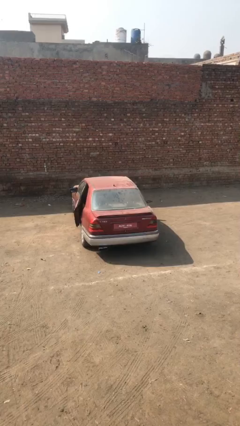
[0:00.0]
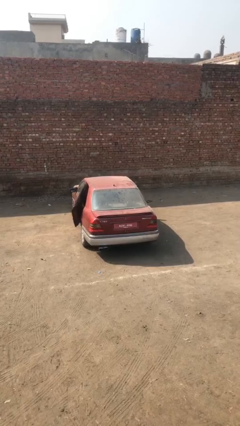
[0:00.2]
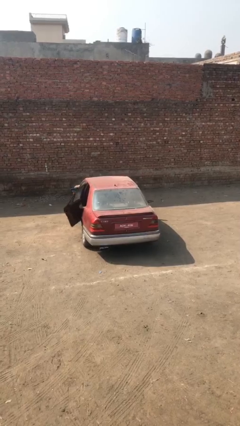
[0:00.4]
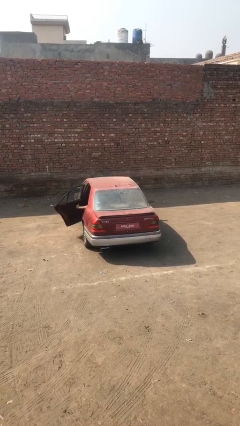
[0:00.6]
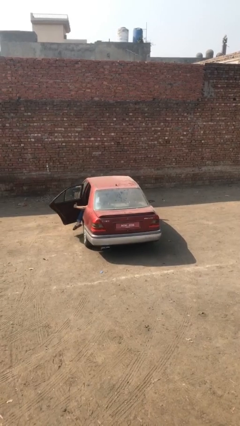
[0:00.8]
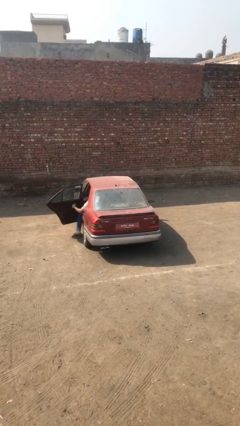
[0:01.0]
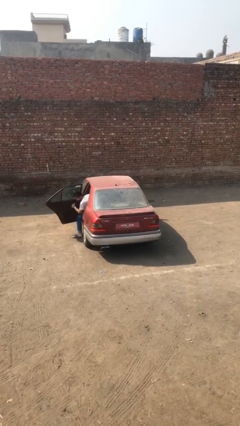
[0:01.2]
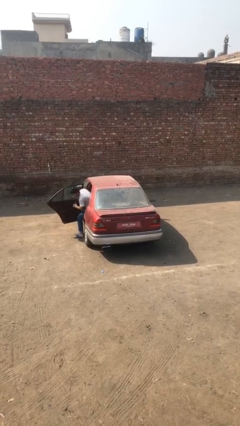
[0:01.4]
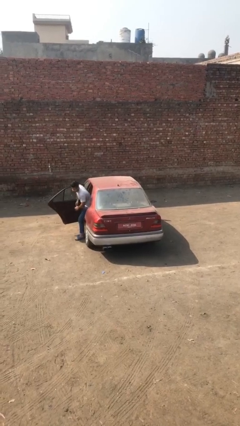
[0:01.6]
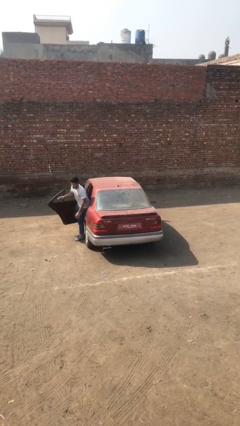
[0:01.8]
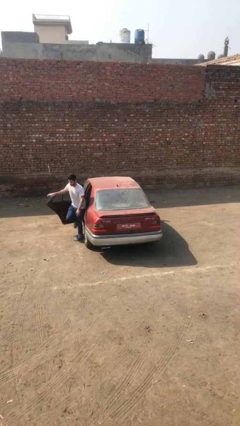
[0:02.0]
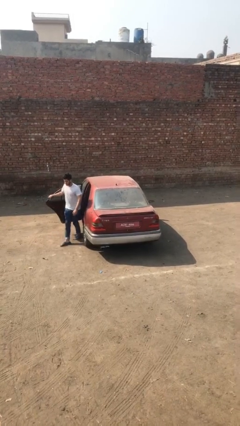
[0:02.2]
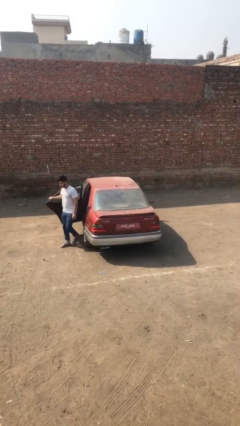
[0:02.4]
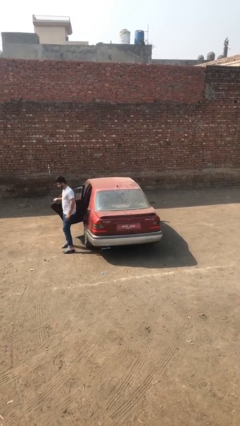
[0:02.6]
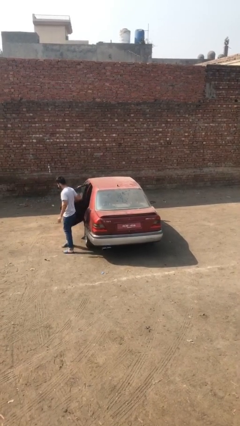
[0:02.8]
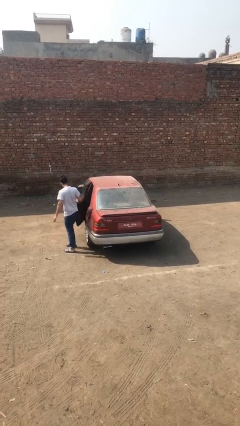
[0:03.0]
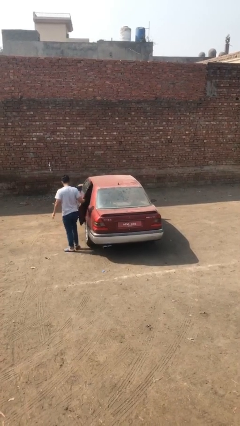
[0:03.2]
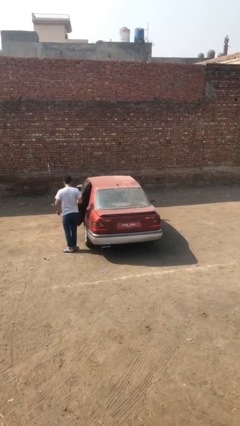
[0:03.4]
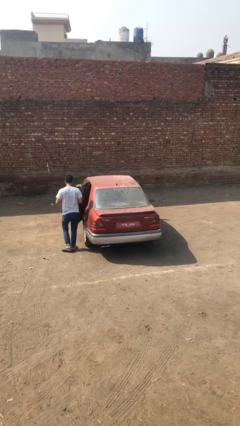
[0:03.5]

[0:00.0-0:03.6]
car drops off person

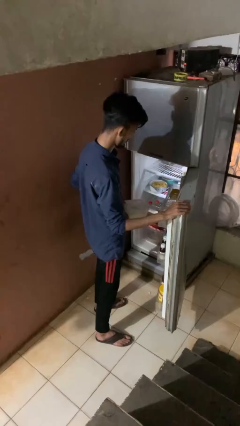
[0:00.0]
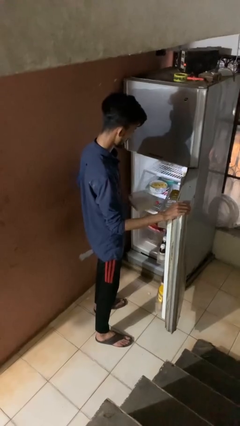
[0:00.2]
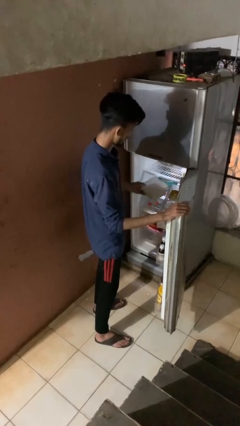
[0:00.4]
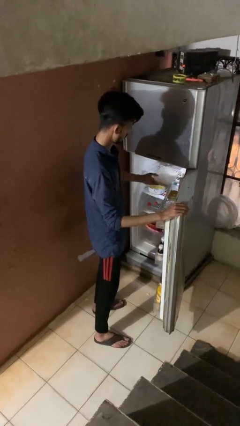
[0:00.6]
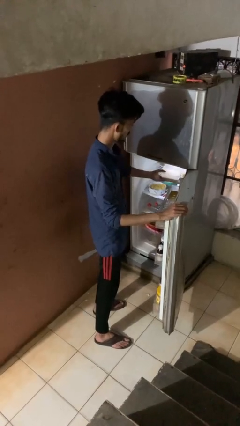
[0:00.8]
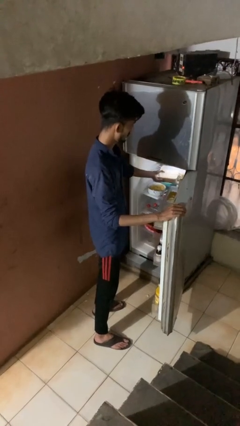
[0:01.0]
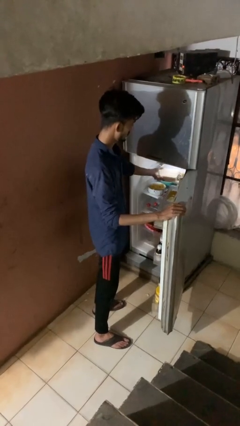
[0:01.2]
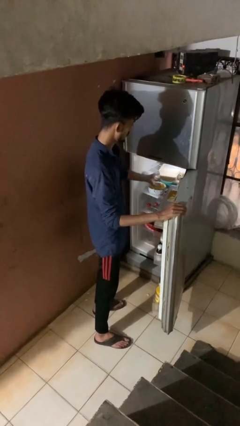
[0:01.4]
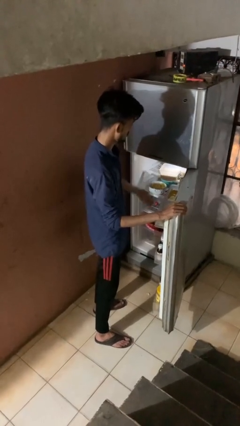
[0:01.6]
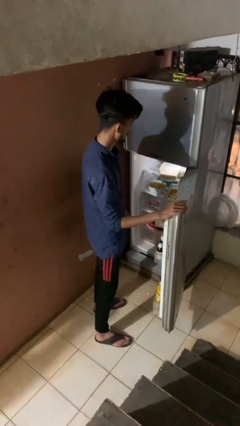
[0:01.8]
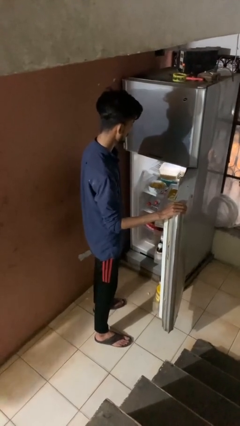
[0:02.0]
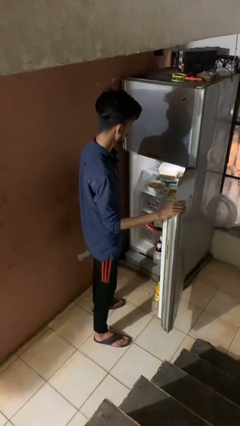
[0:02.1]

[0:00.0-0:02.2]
person loads groceries into refrigerator

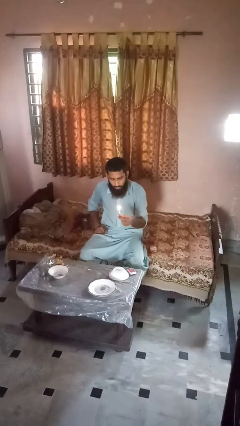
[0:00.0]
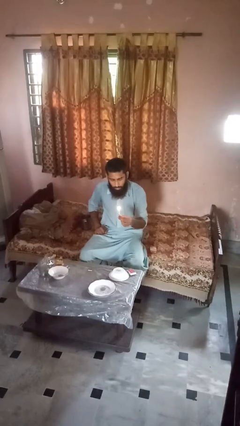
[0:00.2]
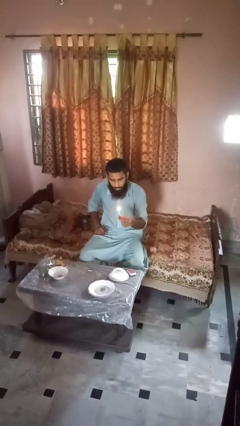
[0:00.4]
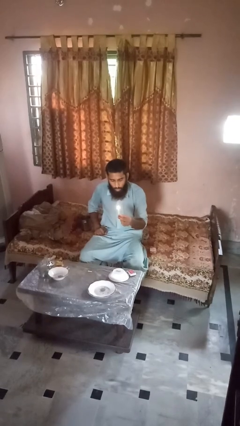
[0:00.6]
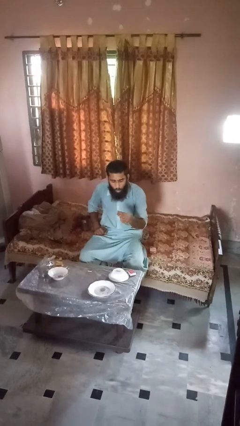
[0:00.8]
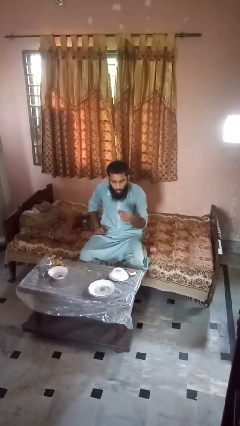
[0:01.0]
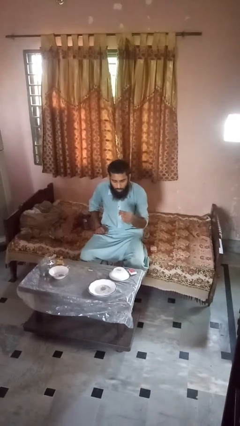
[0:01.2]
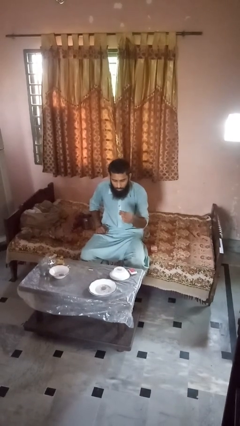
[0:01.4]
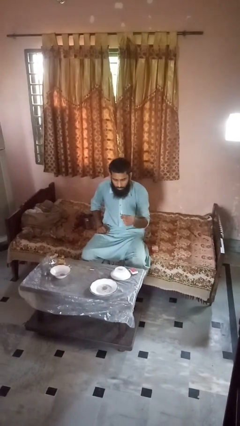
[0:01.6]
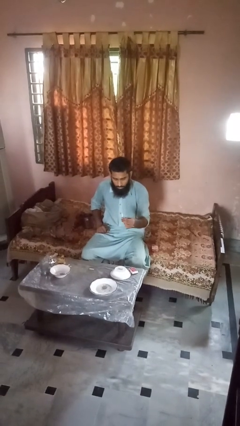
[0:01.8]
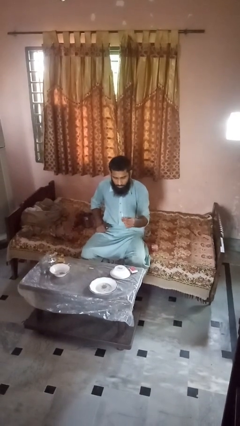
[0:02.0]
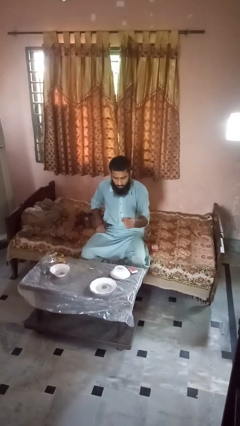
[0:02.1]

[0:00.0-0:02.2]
person extinguishes candle

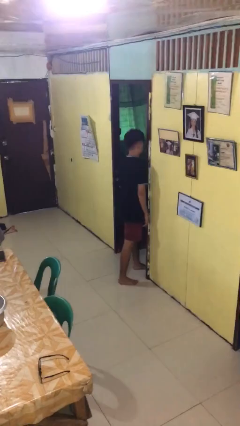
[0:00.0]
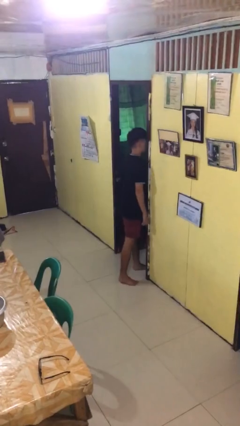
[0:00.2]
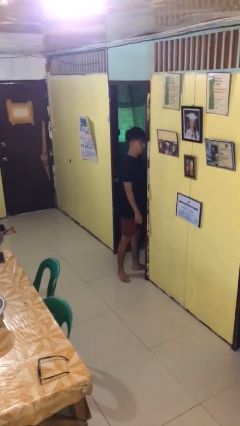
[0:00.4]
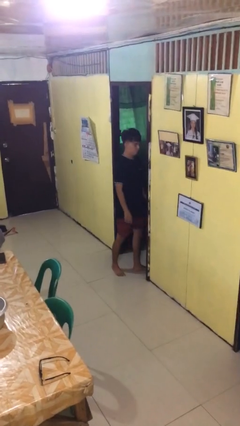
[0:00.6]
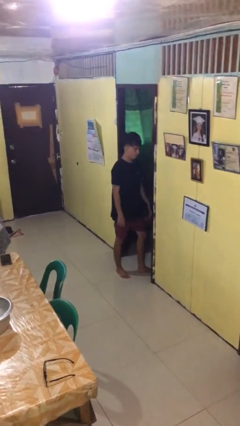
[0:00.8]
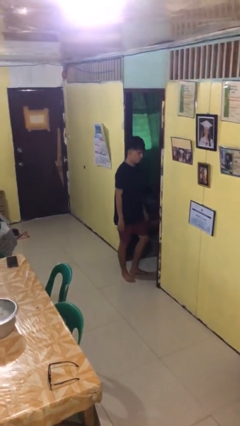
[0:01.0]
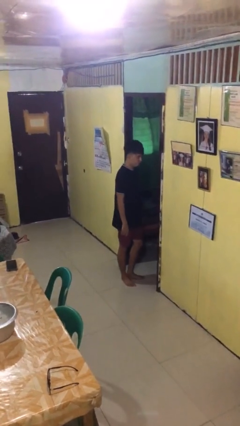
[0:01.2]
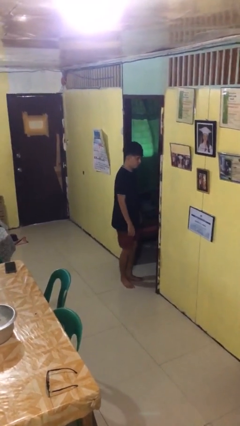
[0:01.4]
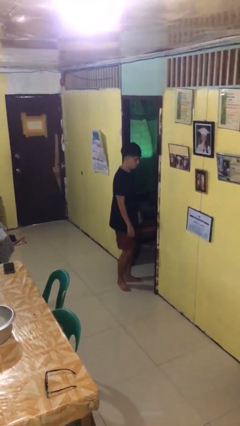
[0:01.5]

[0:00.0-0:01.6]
person bumps into wall

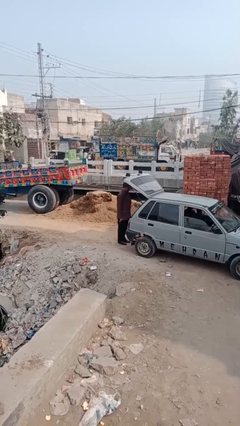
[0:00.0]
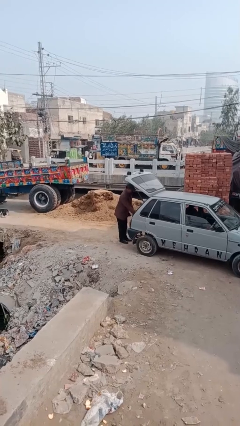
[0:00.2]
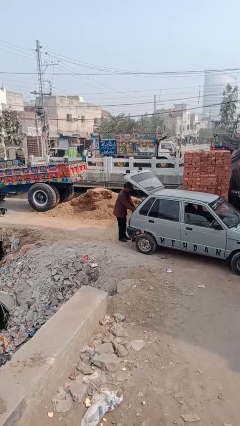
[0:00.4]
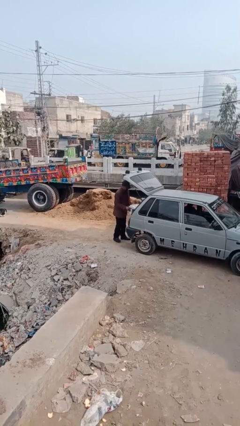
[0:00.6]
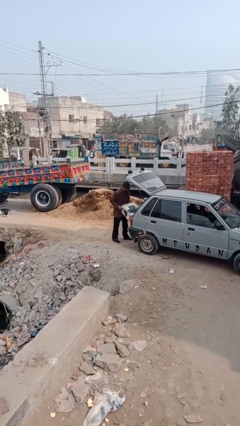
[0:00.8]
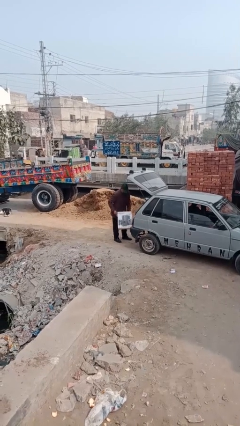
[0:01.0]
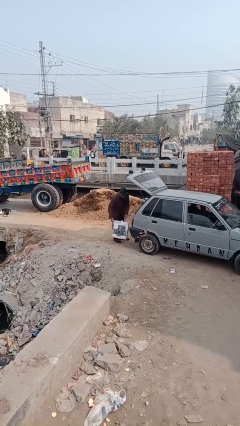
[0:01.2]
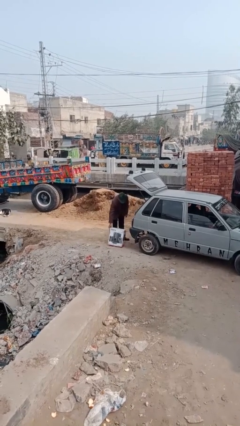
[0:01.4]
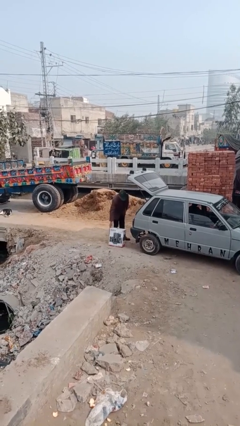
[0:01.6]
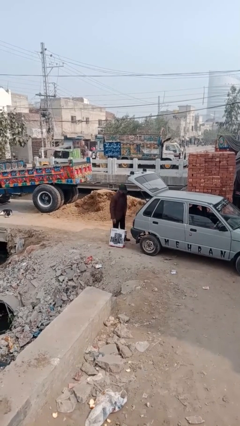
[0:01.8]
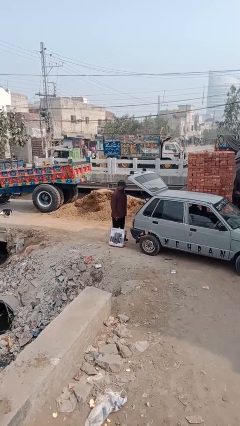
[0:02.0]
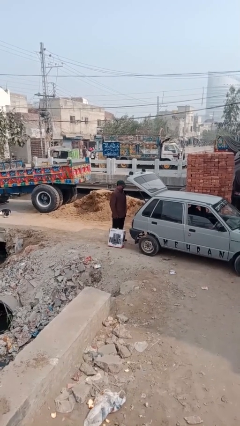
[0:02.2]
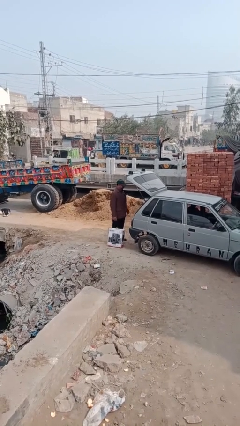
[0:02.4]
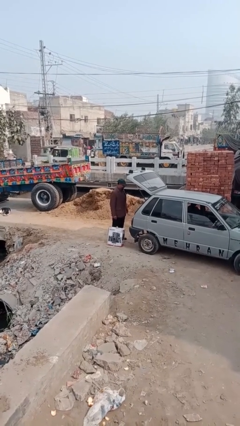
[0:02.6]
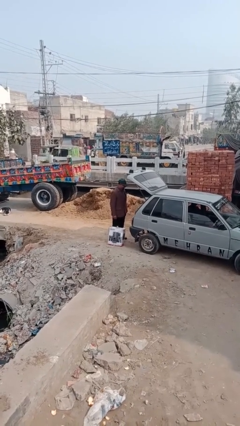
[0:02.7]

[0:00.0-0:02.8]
person unloads car

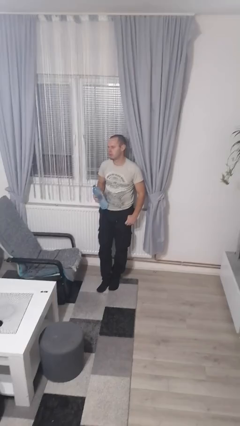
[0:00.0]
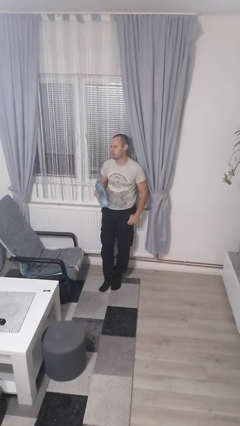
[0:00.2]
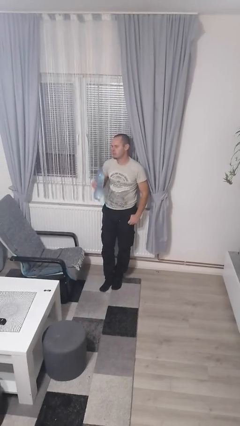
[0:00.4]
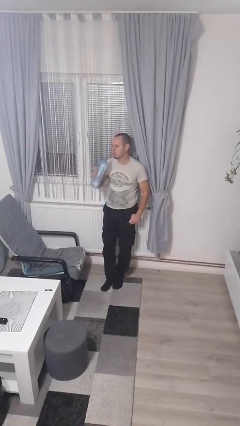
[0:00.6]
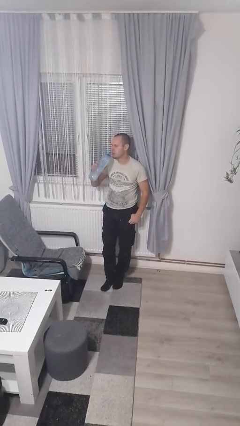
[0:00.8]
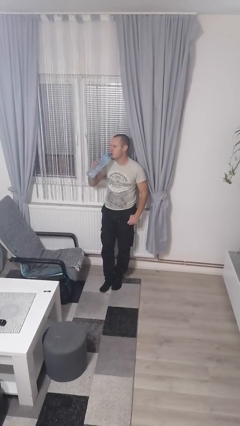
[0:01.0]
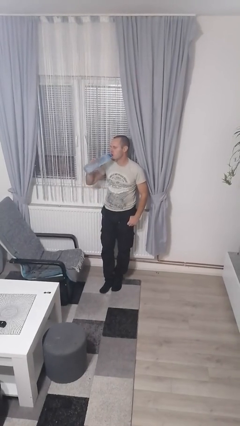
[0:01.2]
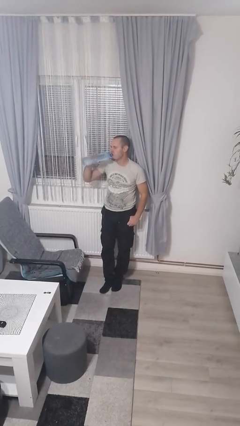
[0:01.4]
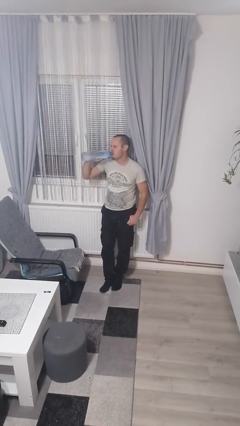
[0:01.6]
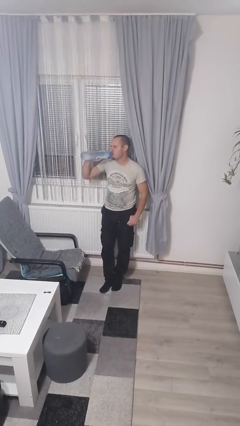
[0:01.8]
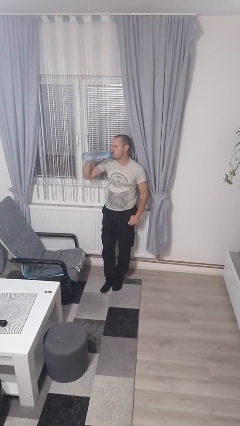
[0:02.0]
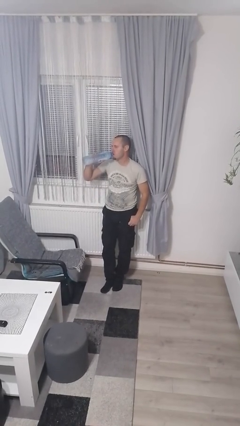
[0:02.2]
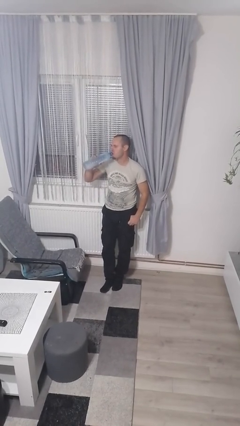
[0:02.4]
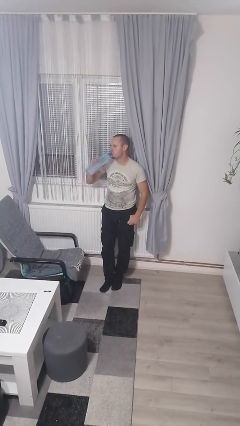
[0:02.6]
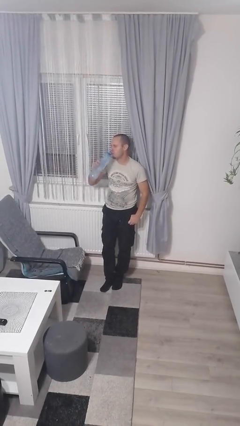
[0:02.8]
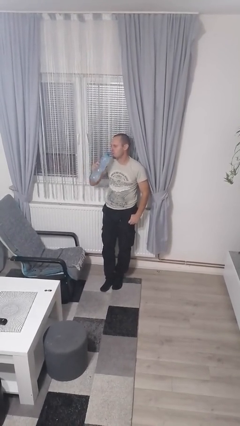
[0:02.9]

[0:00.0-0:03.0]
person drinks from bottle

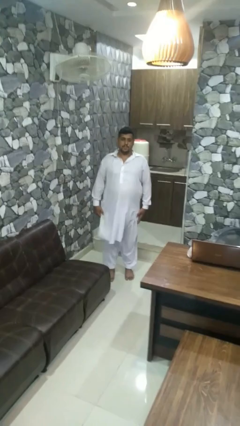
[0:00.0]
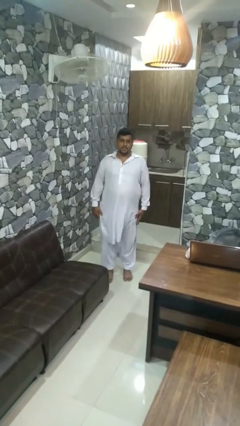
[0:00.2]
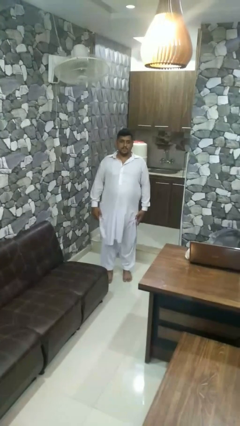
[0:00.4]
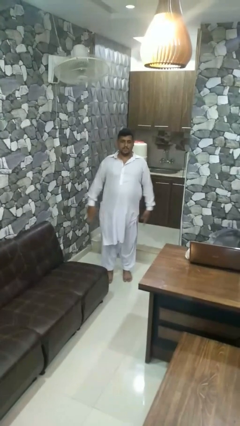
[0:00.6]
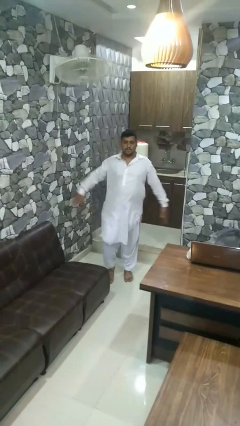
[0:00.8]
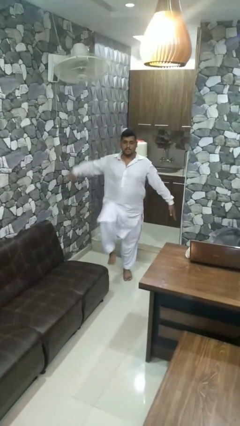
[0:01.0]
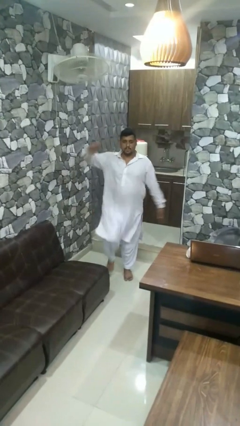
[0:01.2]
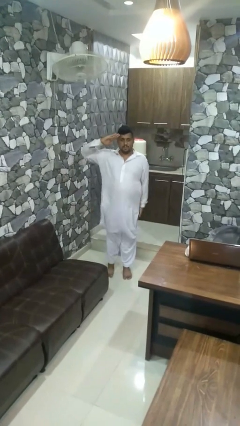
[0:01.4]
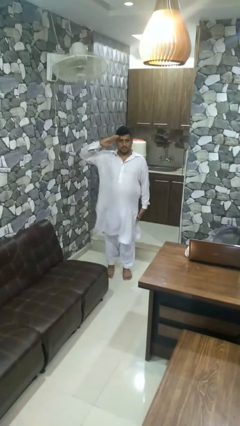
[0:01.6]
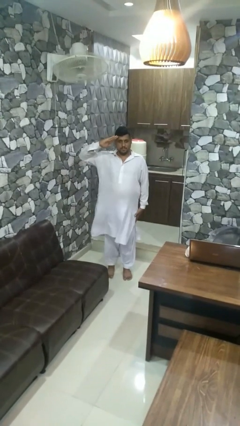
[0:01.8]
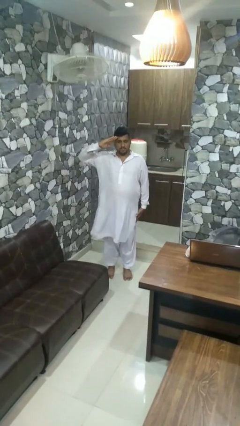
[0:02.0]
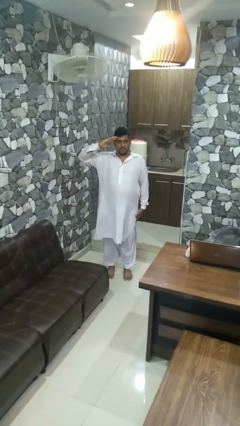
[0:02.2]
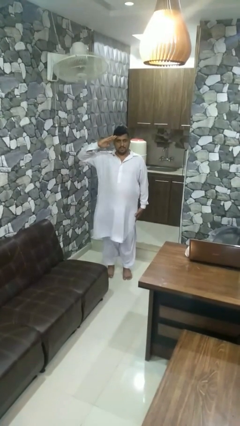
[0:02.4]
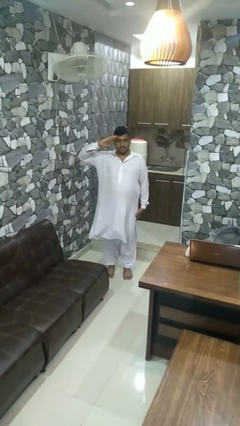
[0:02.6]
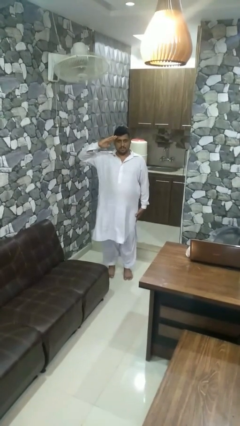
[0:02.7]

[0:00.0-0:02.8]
person salutes
